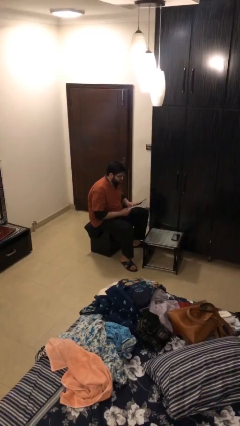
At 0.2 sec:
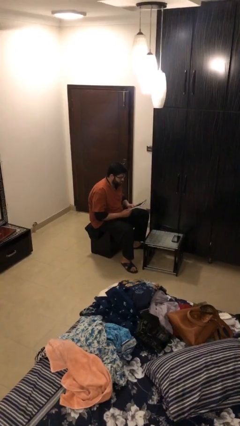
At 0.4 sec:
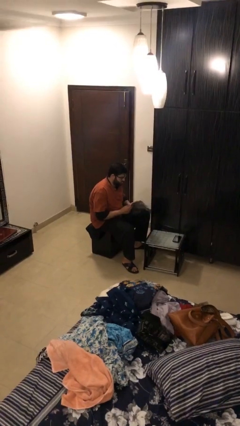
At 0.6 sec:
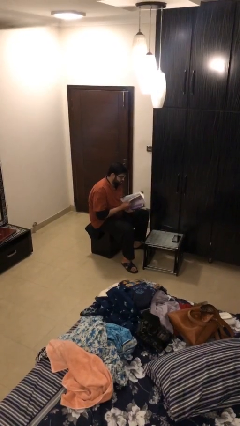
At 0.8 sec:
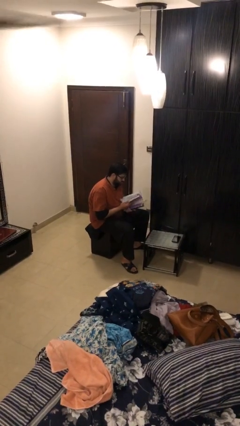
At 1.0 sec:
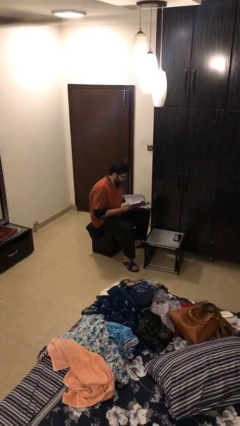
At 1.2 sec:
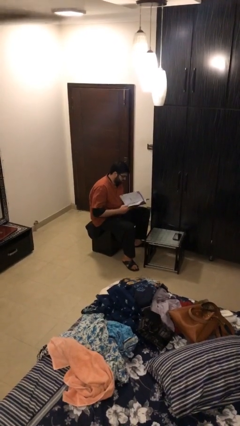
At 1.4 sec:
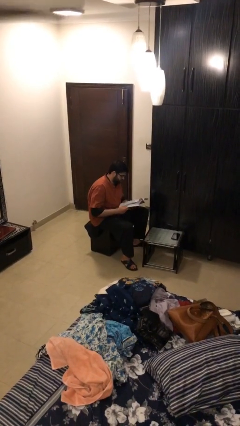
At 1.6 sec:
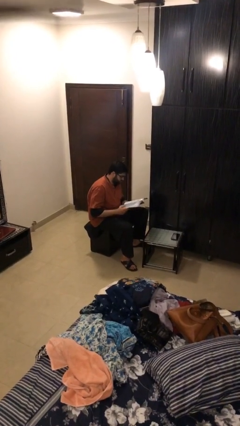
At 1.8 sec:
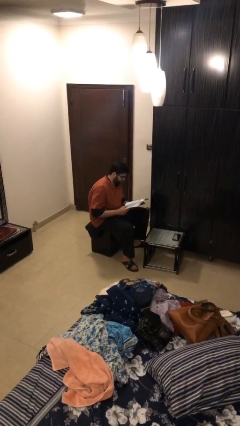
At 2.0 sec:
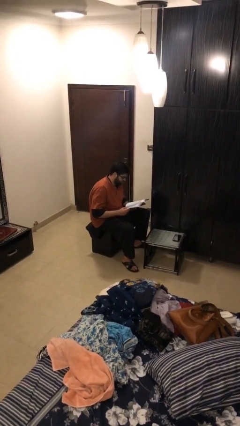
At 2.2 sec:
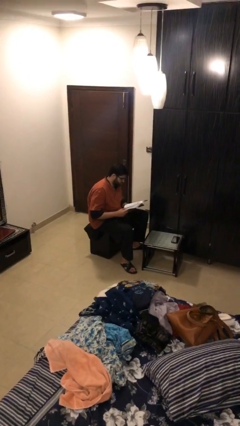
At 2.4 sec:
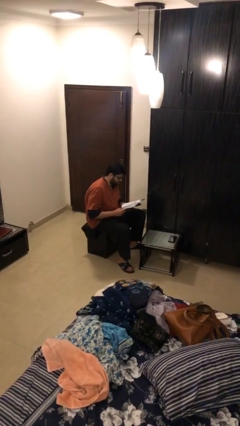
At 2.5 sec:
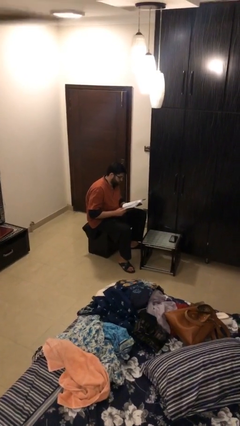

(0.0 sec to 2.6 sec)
person reads document

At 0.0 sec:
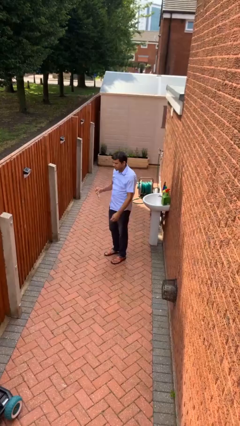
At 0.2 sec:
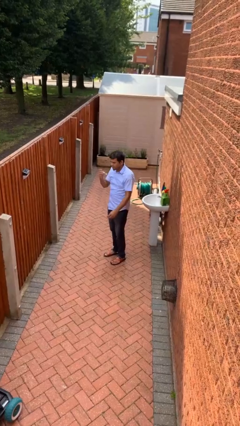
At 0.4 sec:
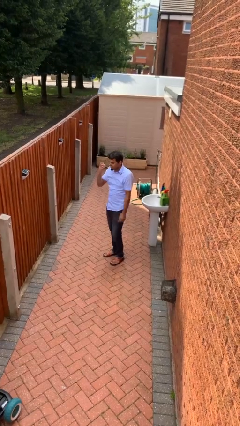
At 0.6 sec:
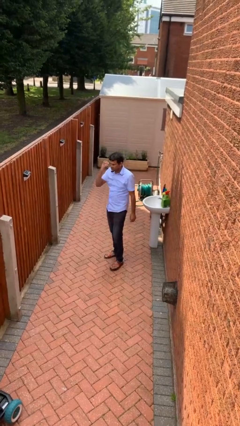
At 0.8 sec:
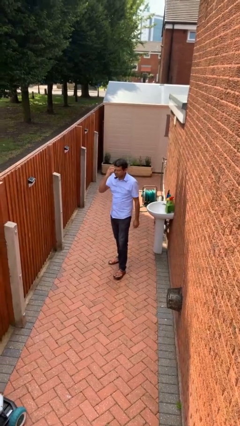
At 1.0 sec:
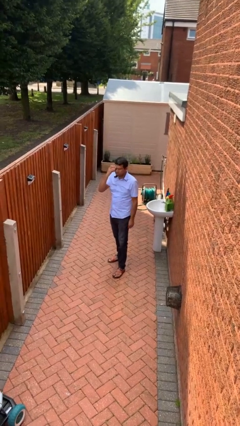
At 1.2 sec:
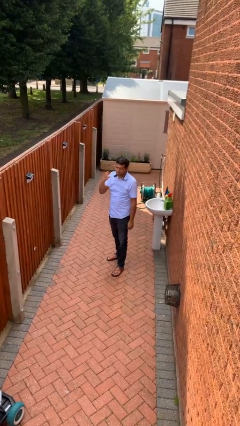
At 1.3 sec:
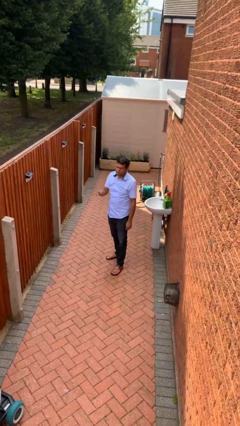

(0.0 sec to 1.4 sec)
person puts on glasses

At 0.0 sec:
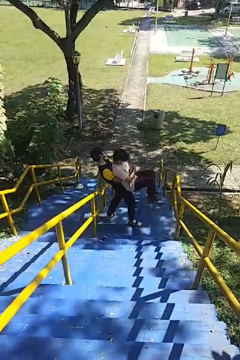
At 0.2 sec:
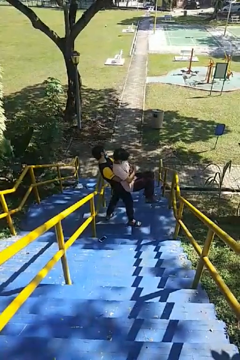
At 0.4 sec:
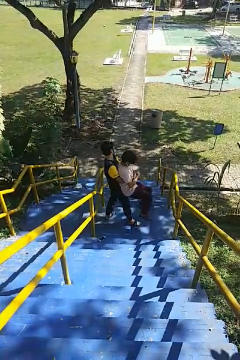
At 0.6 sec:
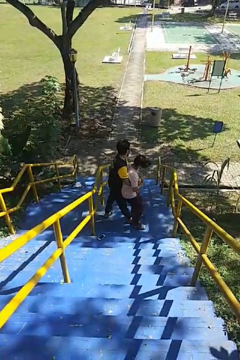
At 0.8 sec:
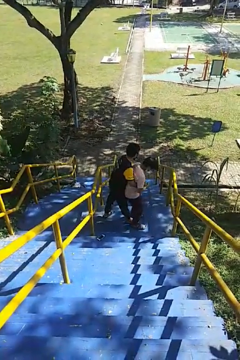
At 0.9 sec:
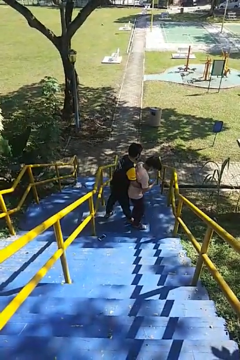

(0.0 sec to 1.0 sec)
person puts down person

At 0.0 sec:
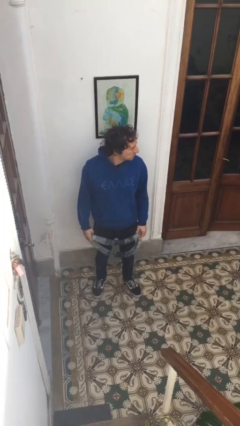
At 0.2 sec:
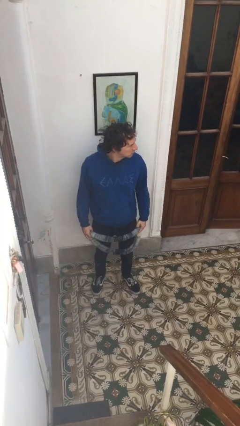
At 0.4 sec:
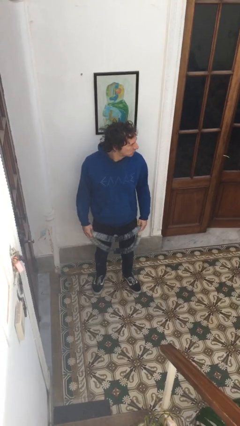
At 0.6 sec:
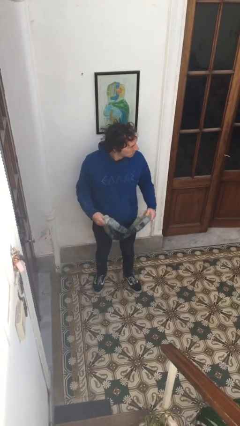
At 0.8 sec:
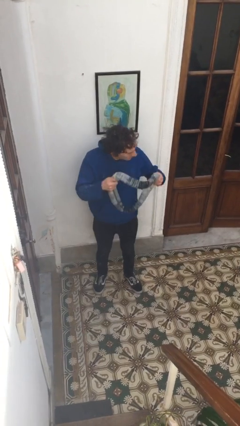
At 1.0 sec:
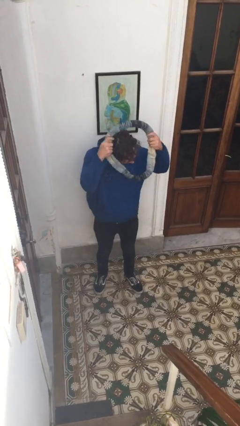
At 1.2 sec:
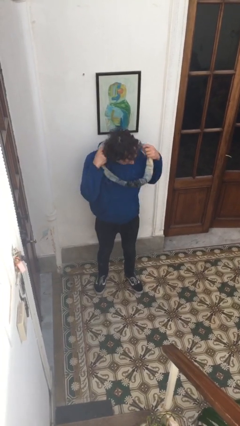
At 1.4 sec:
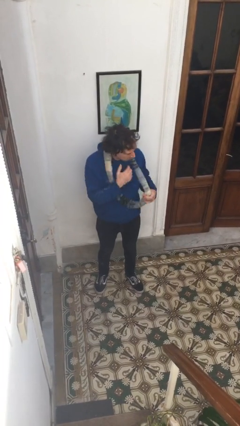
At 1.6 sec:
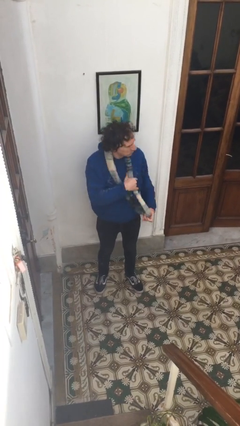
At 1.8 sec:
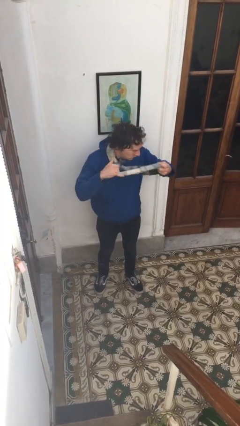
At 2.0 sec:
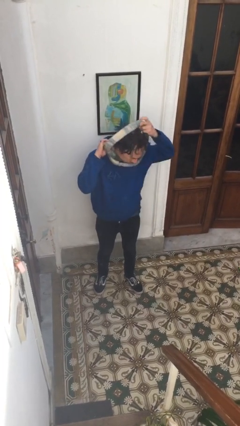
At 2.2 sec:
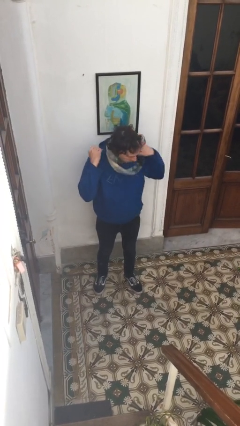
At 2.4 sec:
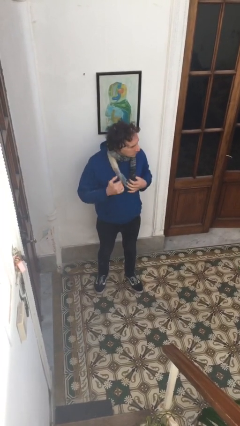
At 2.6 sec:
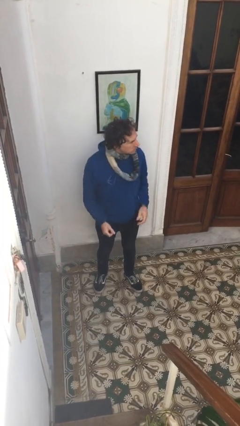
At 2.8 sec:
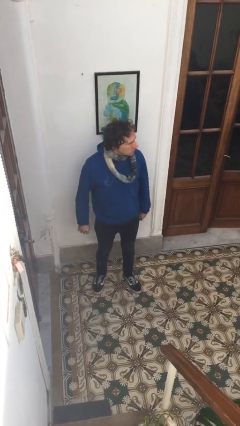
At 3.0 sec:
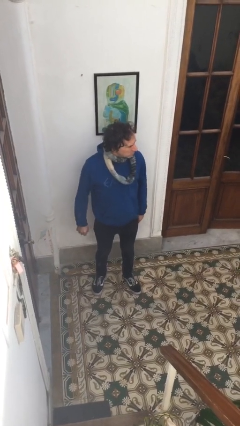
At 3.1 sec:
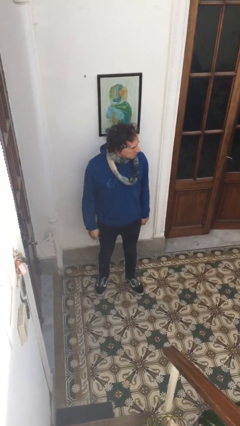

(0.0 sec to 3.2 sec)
person puts on scarf

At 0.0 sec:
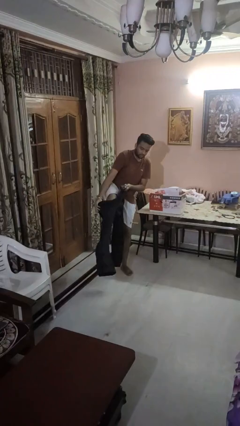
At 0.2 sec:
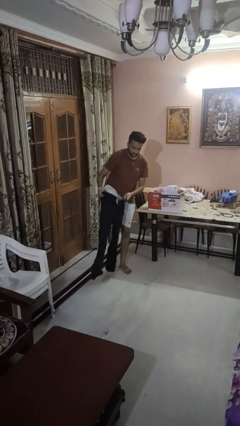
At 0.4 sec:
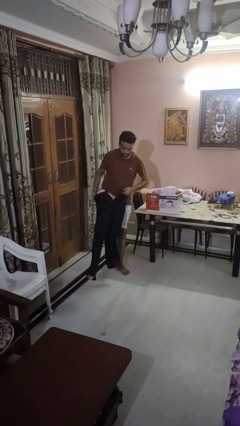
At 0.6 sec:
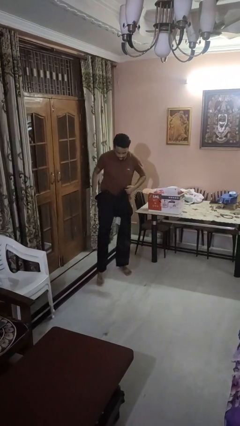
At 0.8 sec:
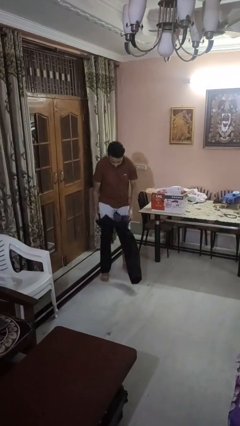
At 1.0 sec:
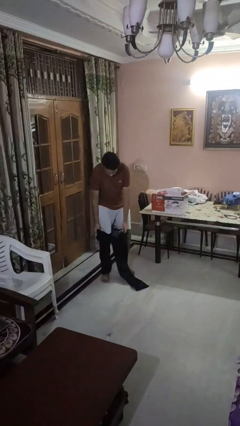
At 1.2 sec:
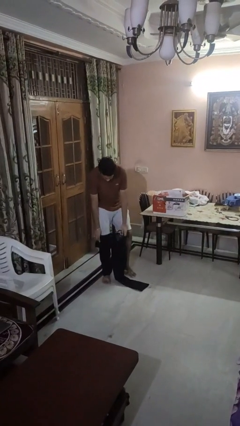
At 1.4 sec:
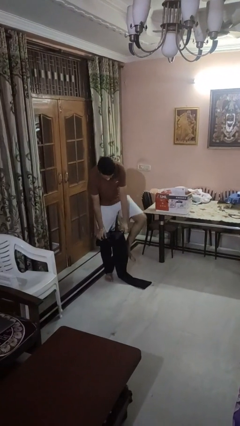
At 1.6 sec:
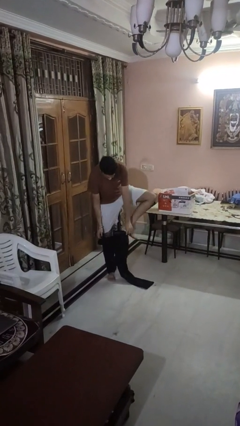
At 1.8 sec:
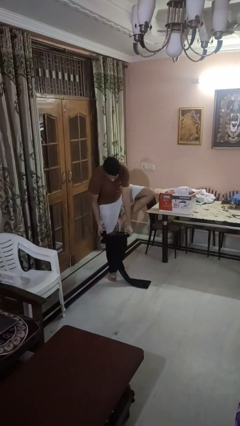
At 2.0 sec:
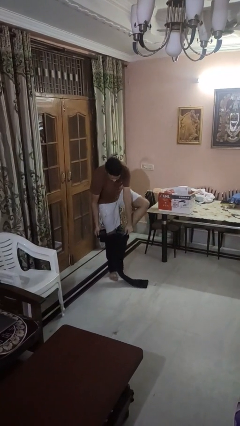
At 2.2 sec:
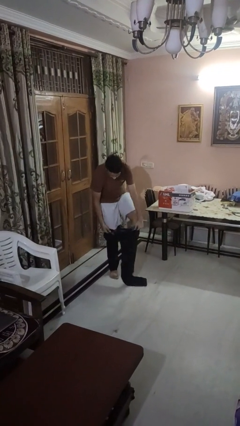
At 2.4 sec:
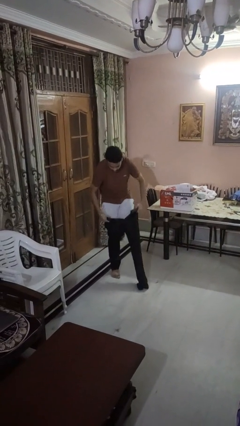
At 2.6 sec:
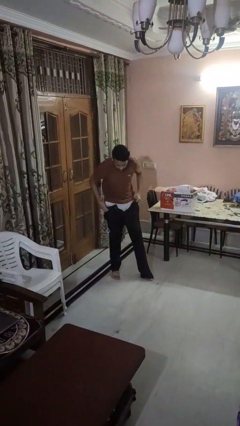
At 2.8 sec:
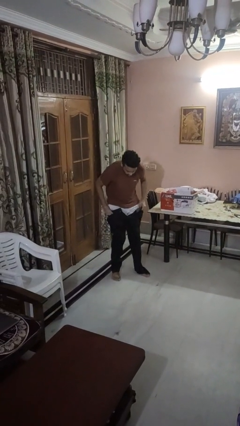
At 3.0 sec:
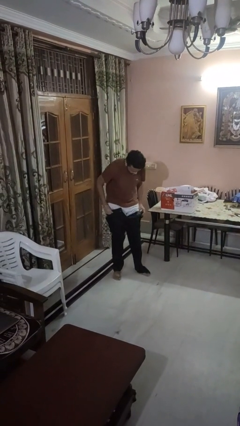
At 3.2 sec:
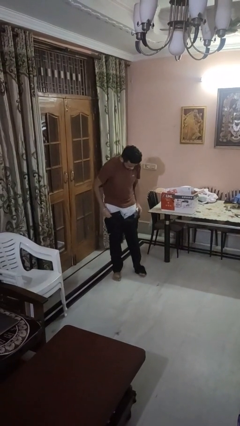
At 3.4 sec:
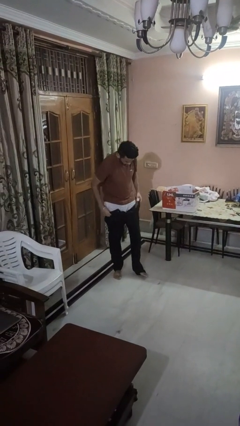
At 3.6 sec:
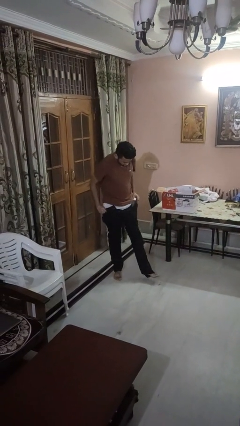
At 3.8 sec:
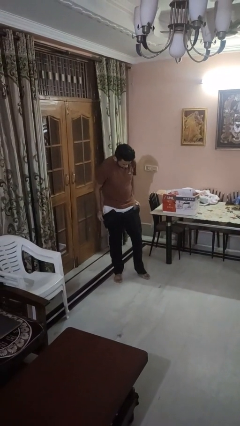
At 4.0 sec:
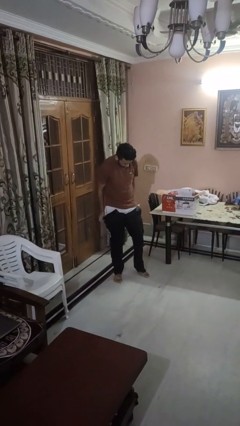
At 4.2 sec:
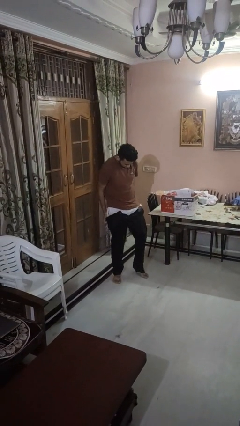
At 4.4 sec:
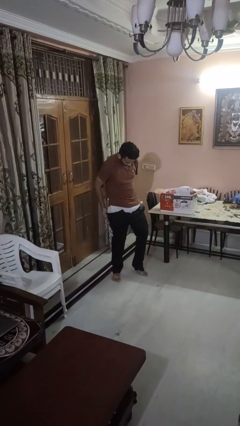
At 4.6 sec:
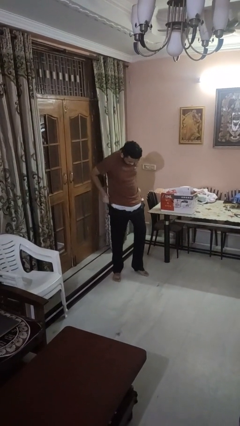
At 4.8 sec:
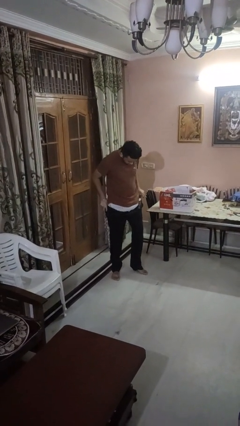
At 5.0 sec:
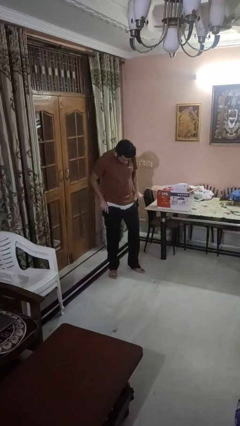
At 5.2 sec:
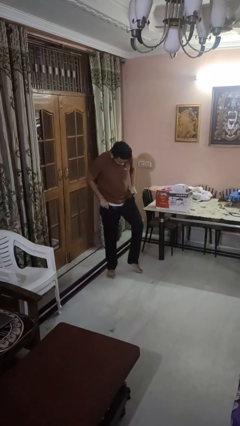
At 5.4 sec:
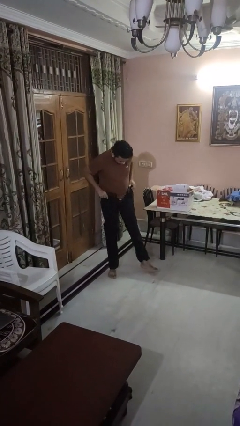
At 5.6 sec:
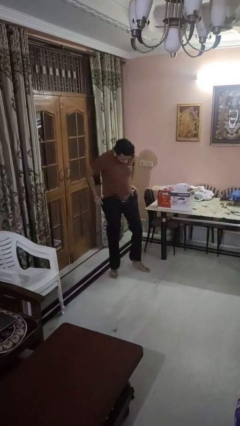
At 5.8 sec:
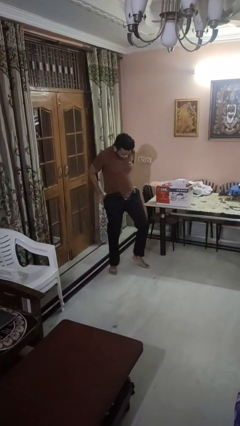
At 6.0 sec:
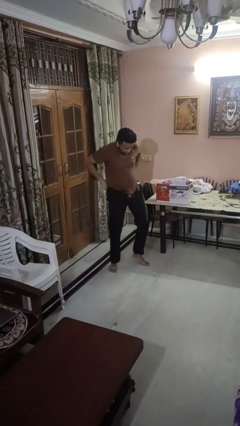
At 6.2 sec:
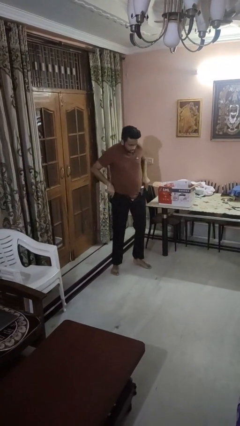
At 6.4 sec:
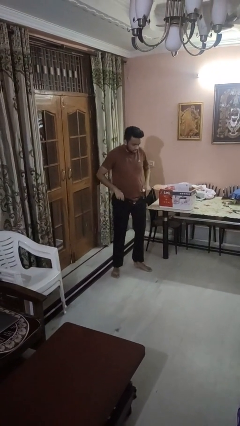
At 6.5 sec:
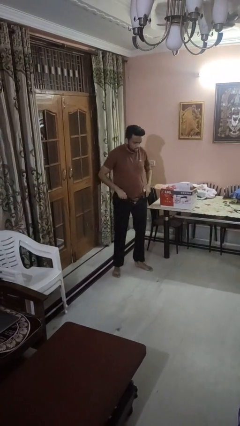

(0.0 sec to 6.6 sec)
person puts on pants

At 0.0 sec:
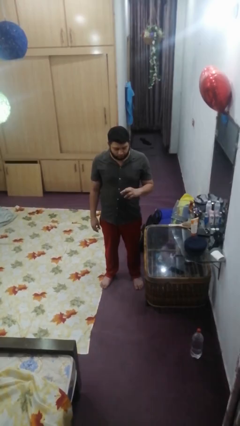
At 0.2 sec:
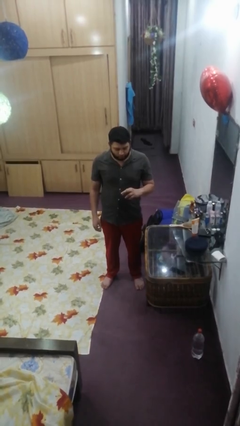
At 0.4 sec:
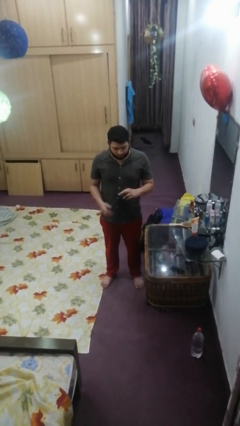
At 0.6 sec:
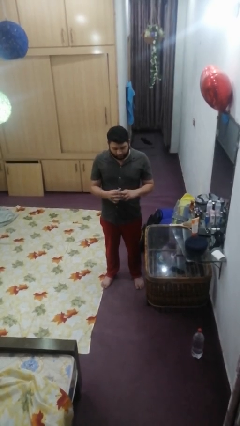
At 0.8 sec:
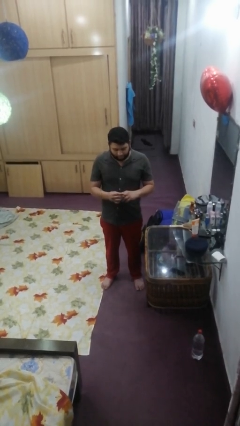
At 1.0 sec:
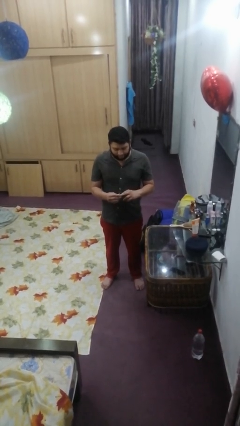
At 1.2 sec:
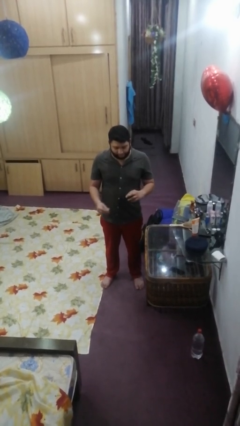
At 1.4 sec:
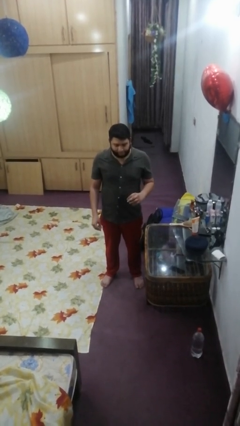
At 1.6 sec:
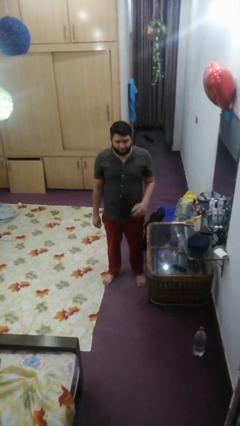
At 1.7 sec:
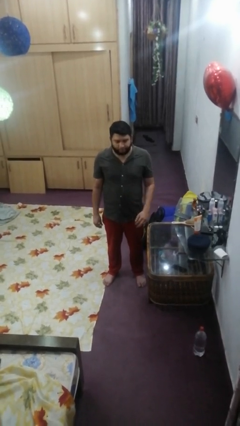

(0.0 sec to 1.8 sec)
person takes off ring

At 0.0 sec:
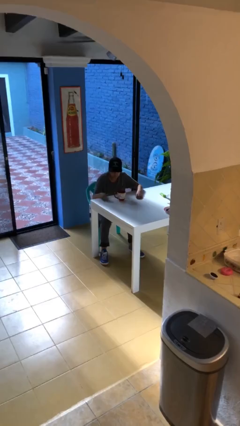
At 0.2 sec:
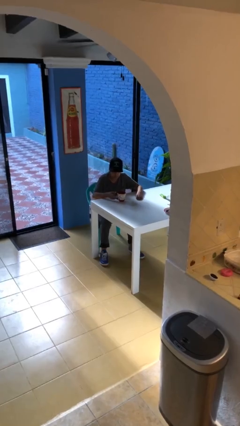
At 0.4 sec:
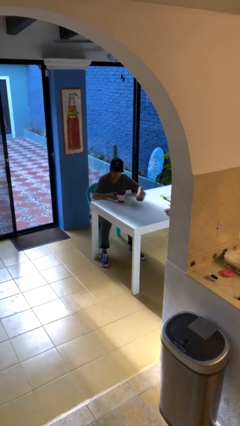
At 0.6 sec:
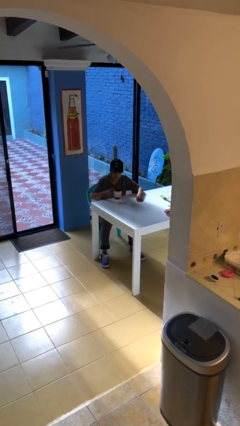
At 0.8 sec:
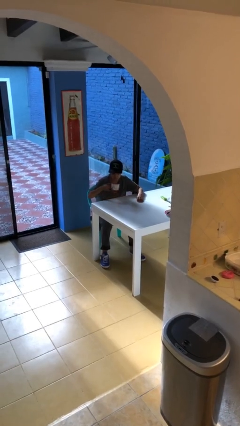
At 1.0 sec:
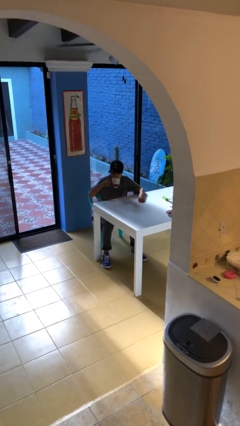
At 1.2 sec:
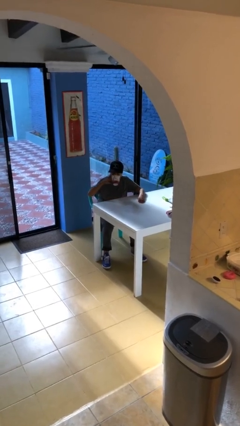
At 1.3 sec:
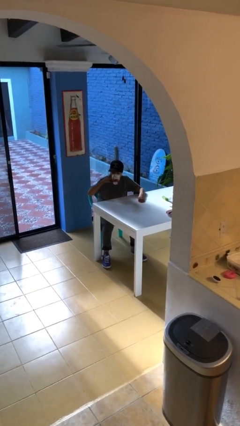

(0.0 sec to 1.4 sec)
person picks up object from table
